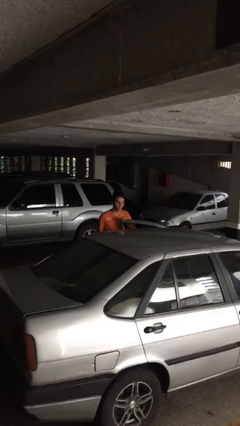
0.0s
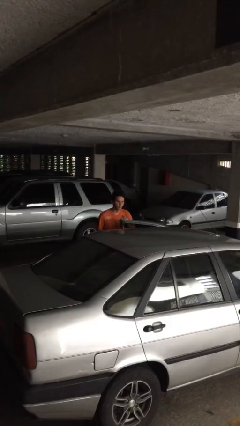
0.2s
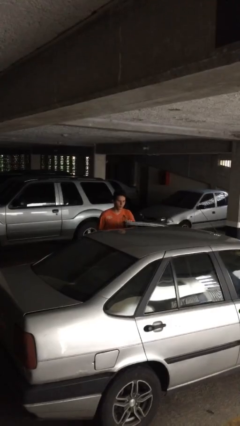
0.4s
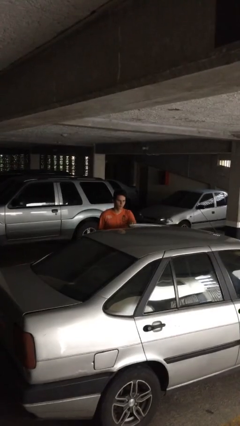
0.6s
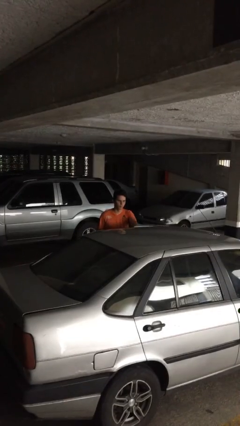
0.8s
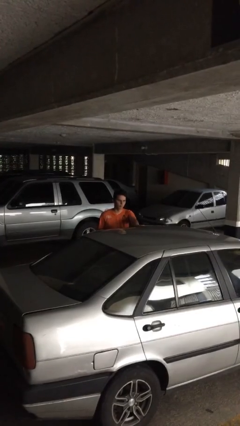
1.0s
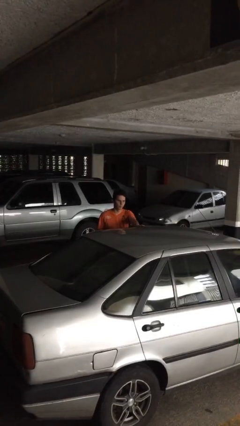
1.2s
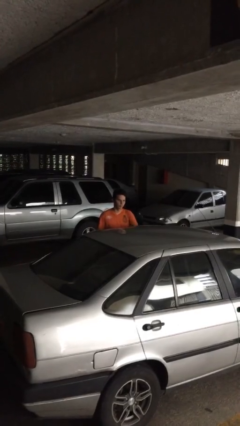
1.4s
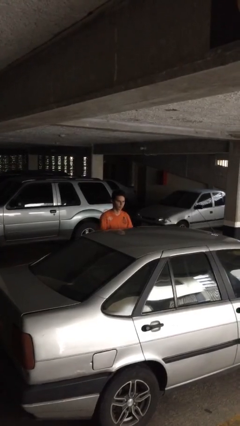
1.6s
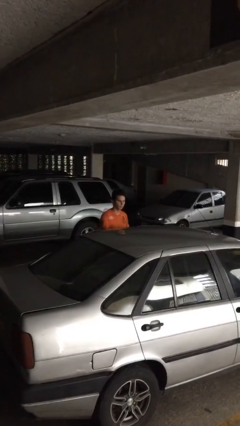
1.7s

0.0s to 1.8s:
person closes car door

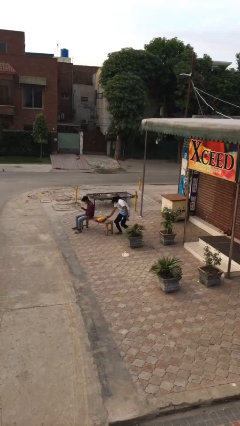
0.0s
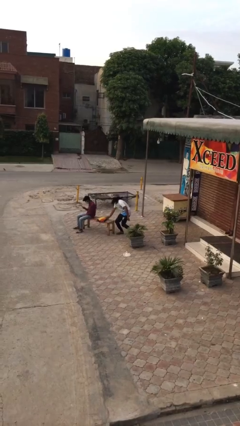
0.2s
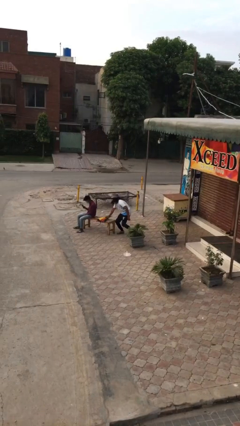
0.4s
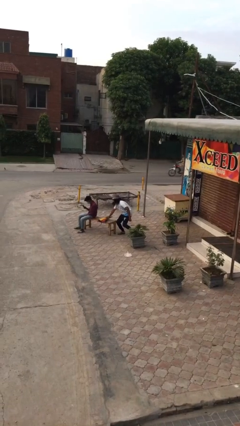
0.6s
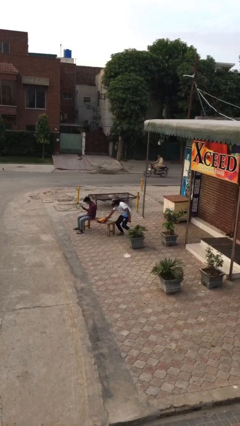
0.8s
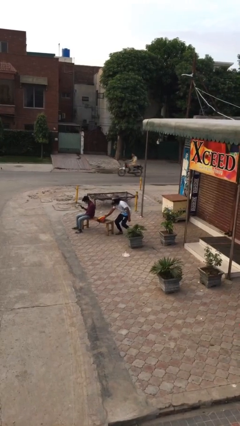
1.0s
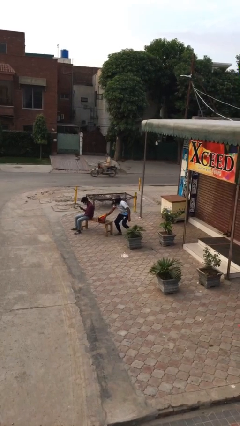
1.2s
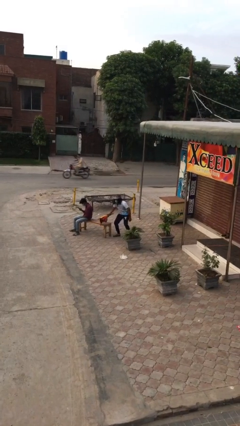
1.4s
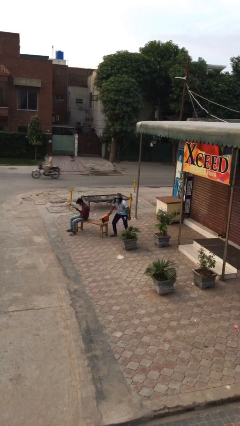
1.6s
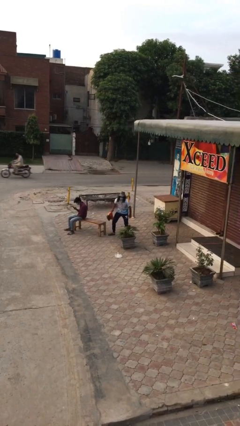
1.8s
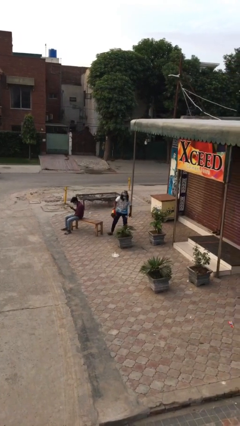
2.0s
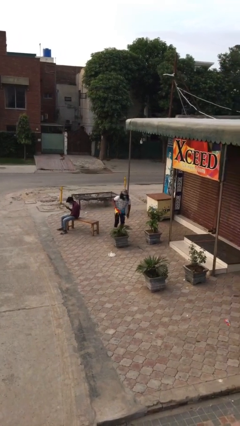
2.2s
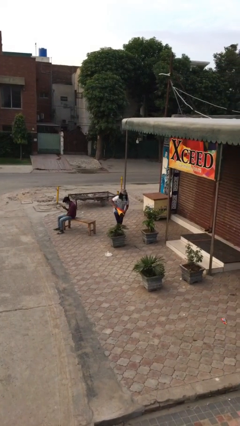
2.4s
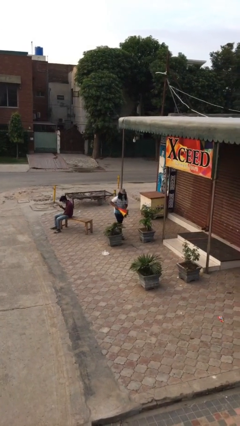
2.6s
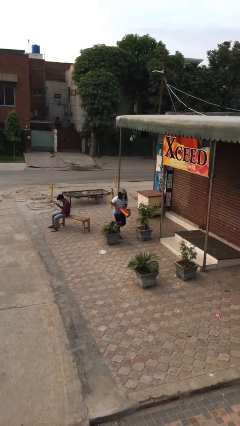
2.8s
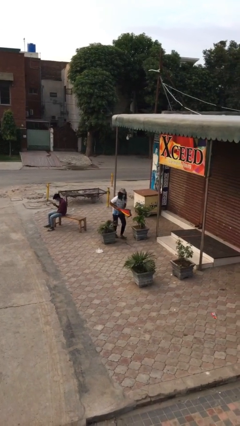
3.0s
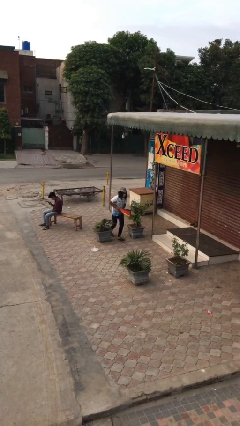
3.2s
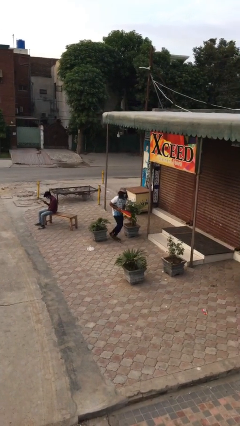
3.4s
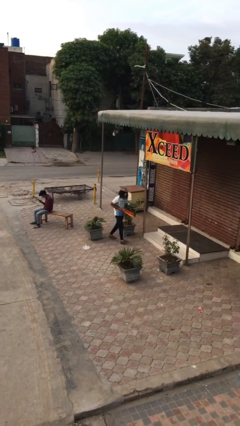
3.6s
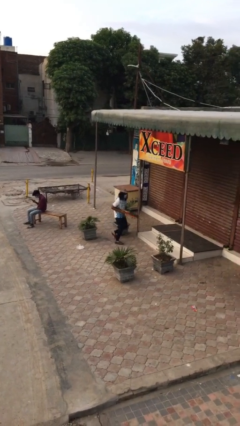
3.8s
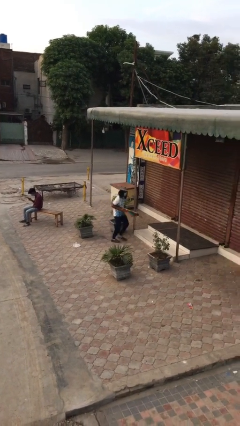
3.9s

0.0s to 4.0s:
person steals object from person

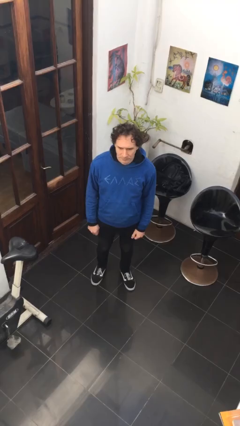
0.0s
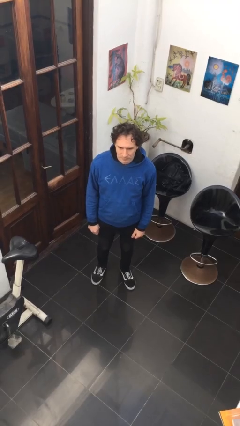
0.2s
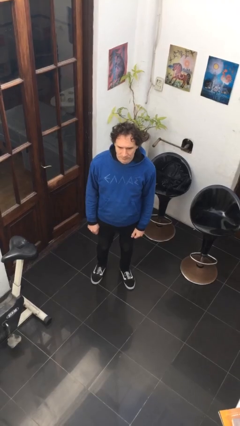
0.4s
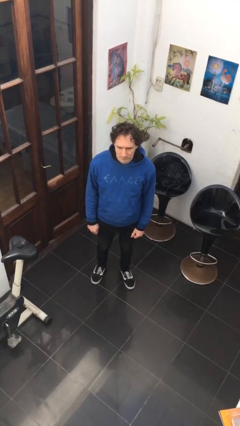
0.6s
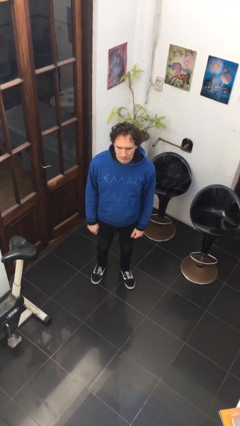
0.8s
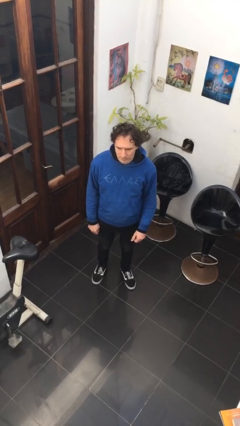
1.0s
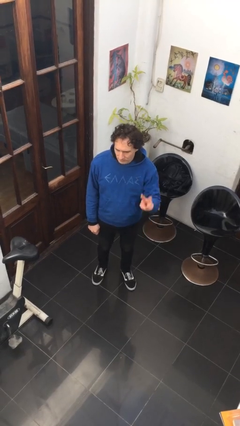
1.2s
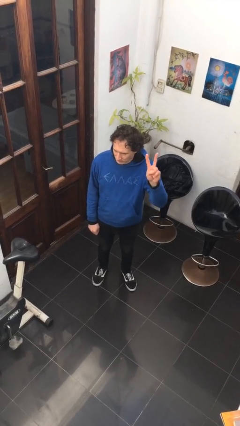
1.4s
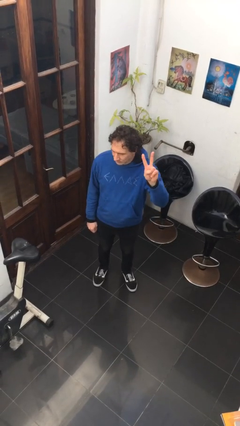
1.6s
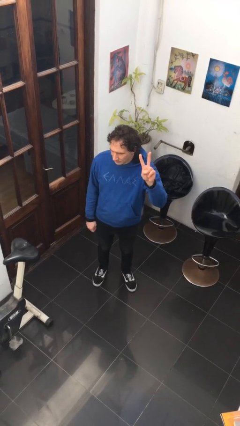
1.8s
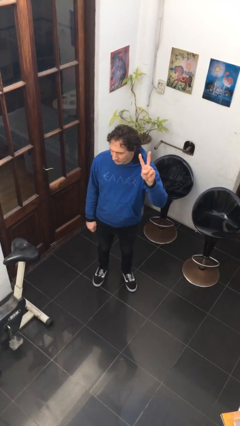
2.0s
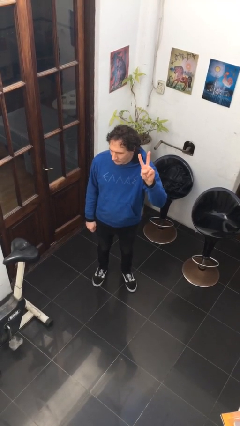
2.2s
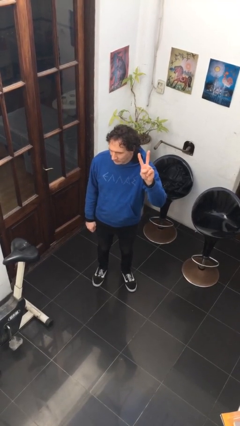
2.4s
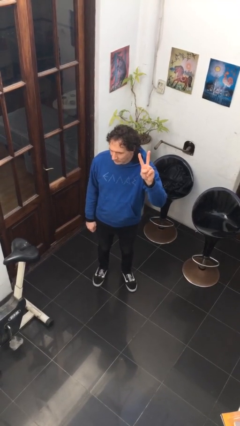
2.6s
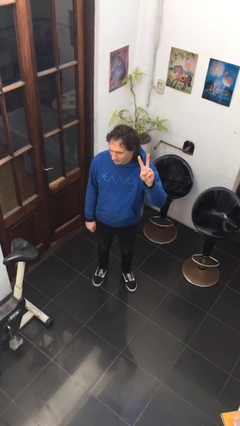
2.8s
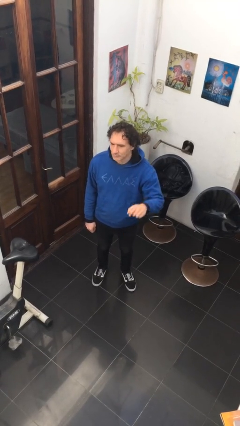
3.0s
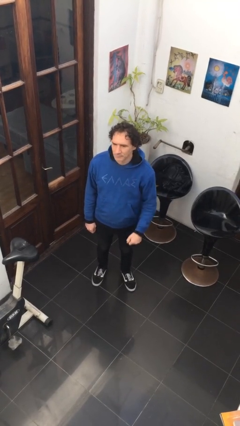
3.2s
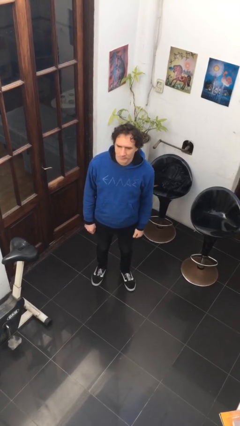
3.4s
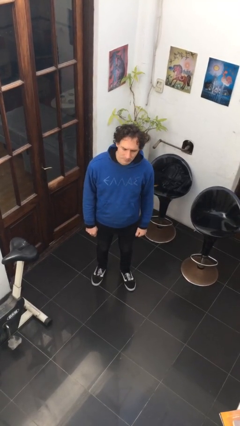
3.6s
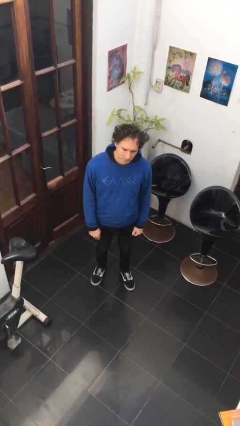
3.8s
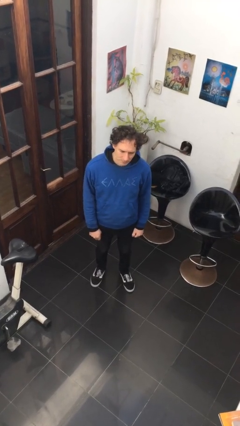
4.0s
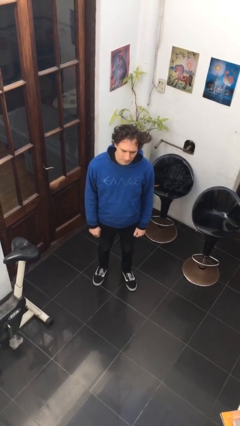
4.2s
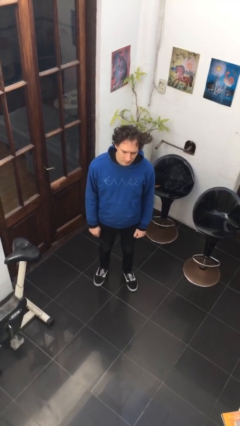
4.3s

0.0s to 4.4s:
person gestures peace

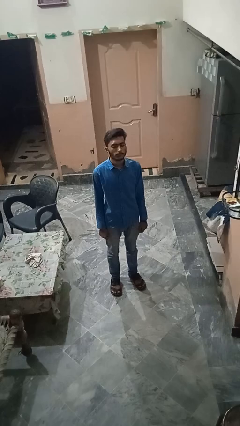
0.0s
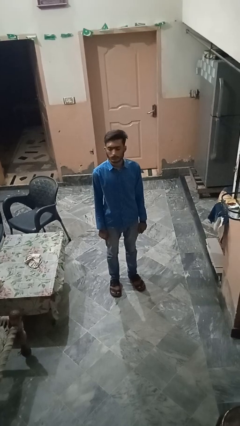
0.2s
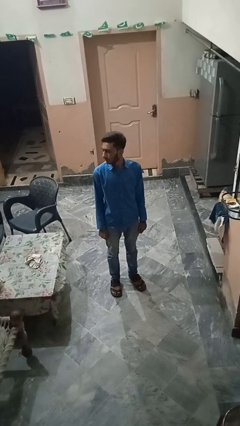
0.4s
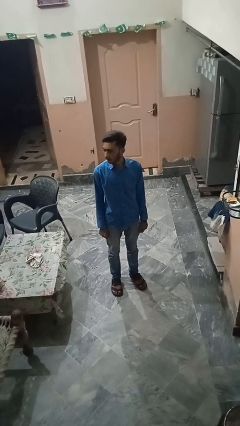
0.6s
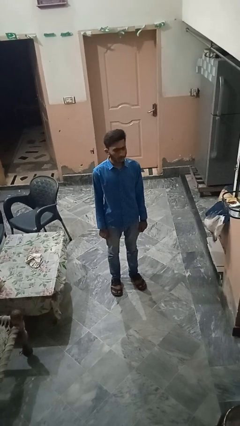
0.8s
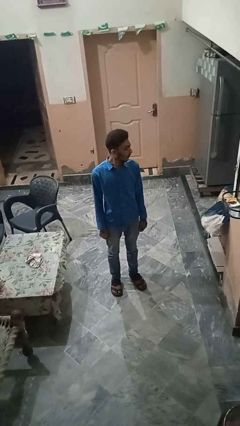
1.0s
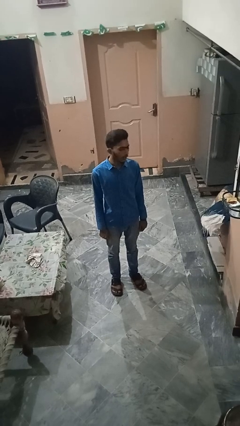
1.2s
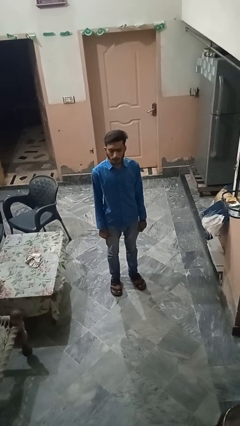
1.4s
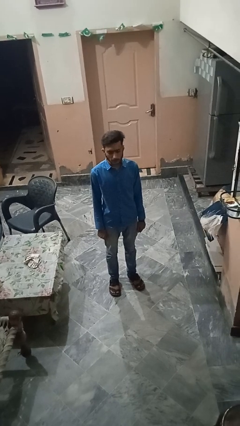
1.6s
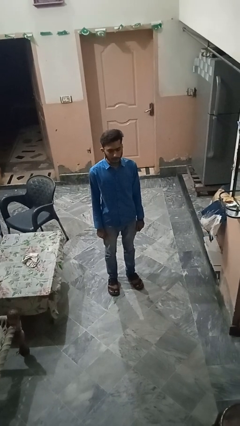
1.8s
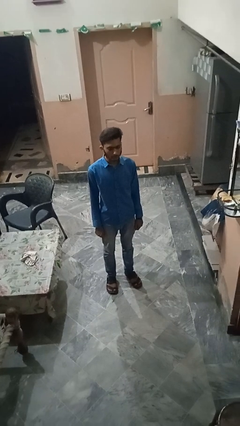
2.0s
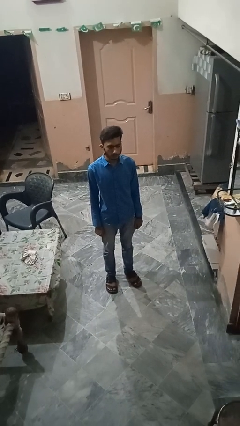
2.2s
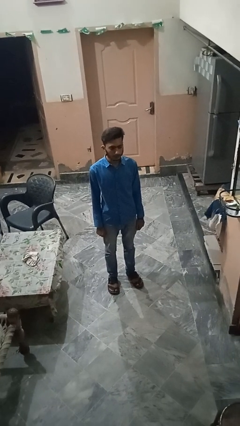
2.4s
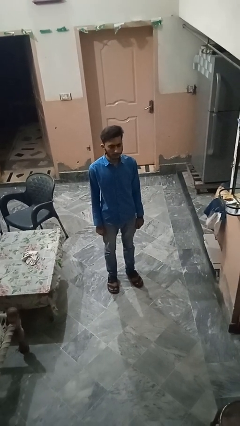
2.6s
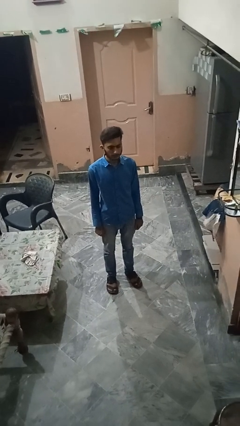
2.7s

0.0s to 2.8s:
person shakes head

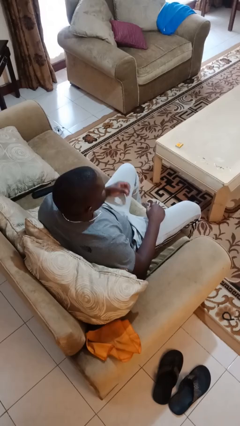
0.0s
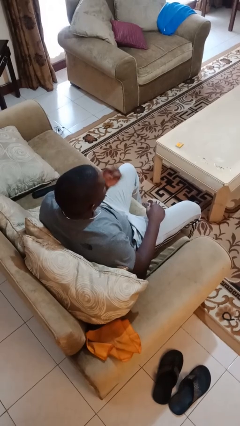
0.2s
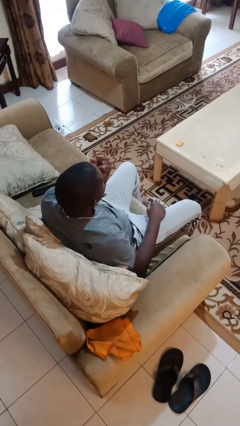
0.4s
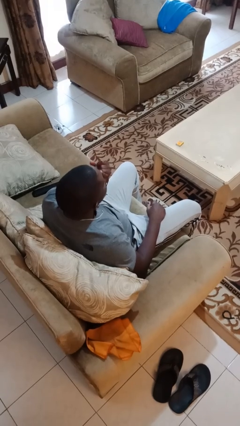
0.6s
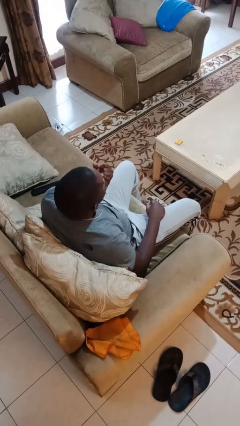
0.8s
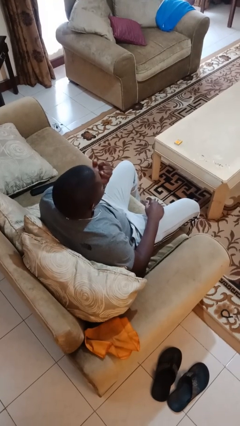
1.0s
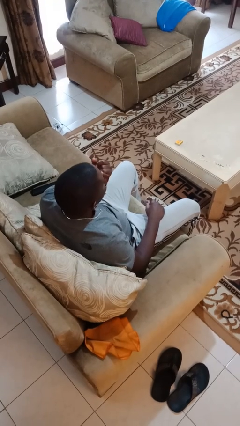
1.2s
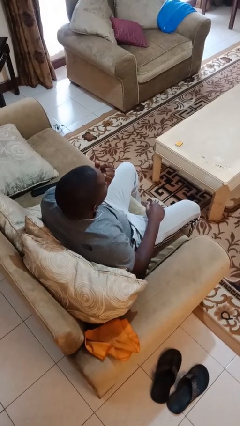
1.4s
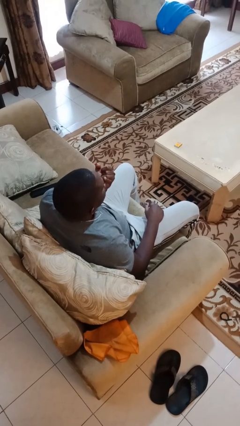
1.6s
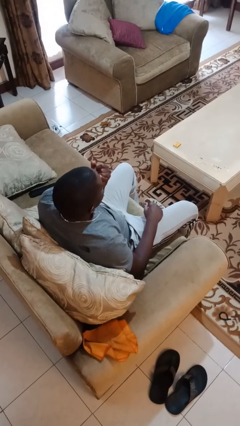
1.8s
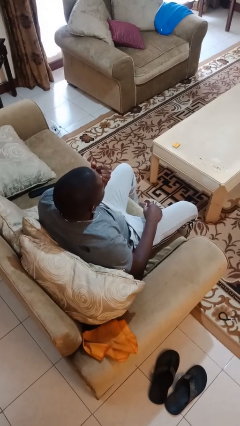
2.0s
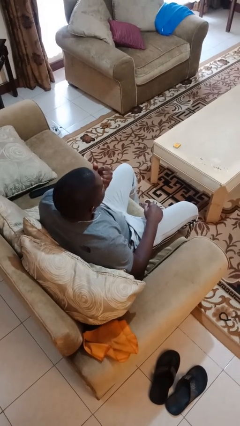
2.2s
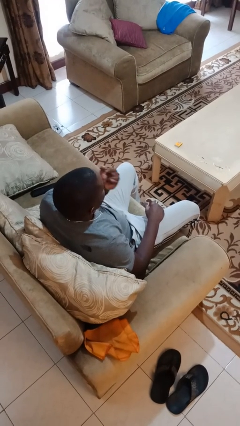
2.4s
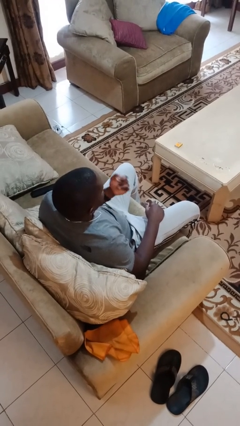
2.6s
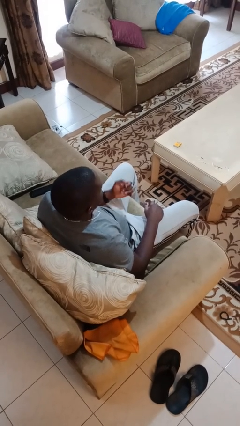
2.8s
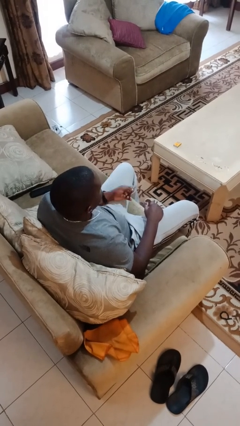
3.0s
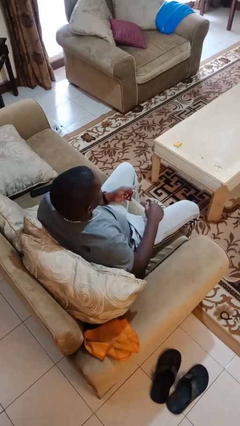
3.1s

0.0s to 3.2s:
person licks fingers

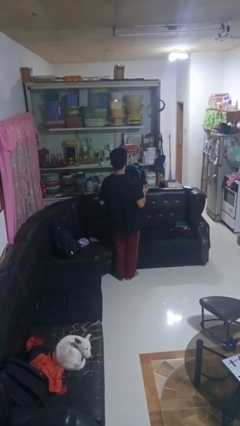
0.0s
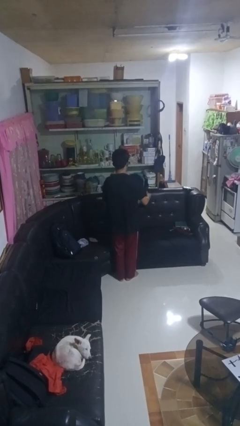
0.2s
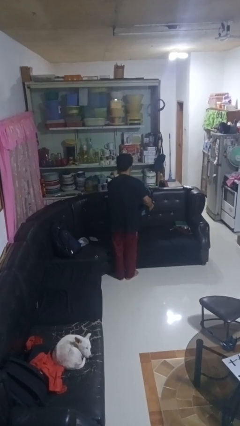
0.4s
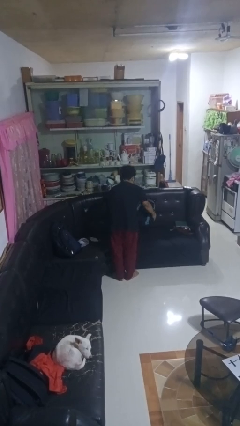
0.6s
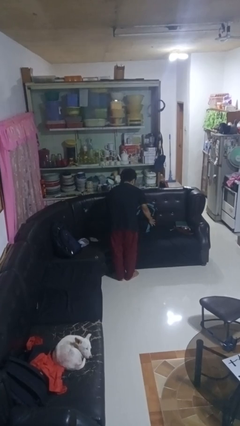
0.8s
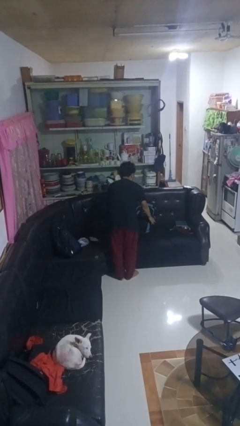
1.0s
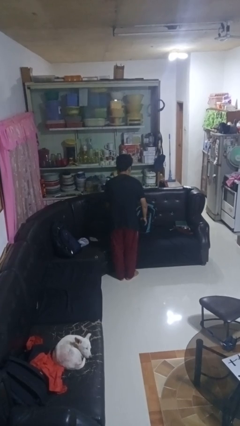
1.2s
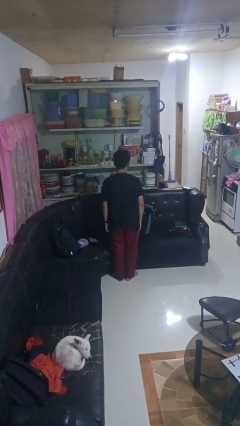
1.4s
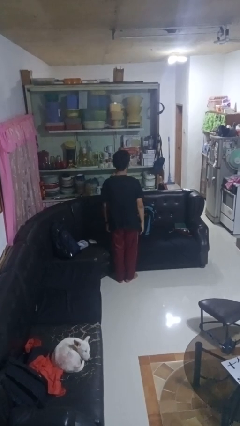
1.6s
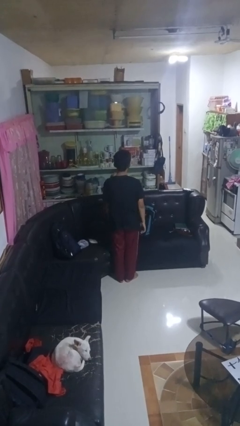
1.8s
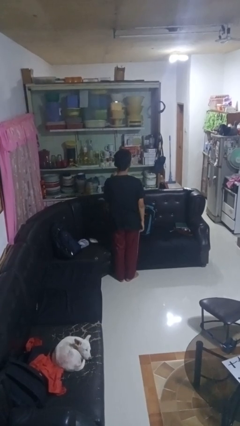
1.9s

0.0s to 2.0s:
person puts down object on couch
